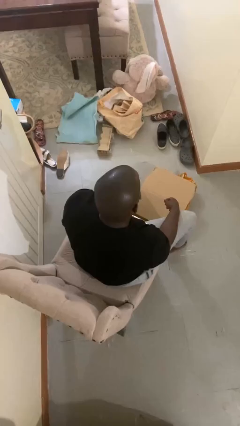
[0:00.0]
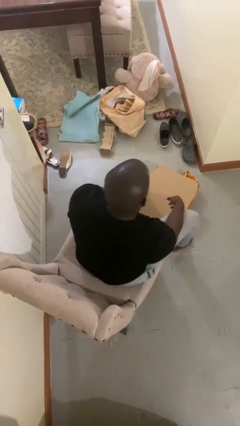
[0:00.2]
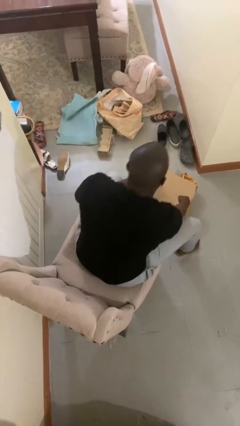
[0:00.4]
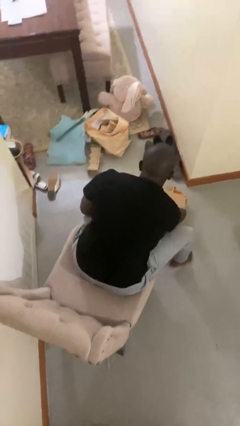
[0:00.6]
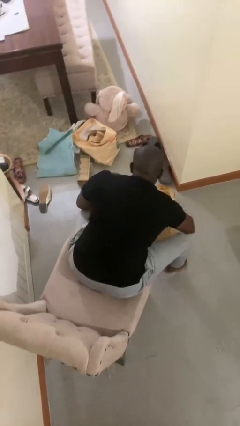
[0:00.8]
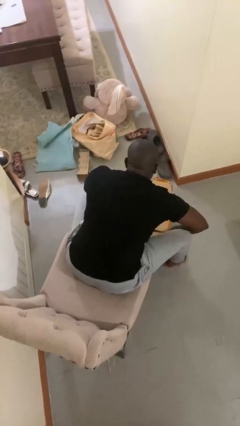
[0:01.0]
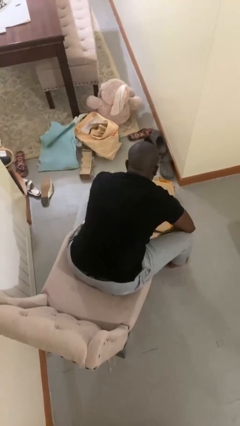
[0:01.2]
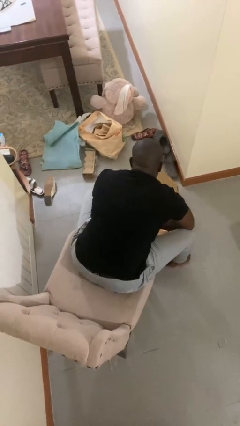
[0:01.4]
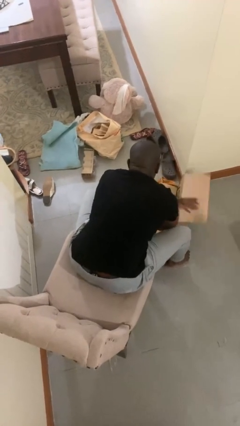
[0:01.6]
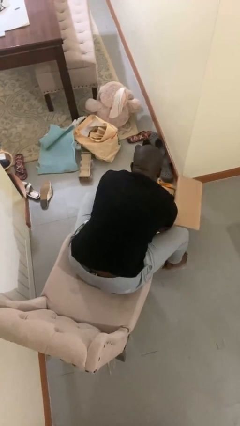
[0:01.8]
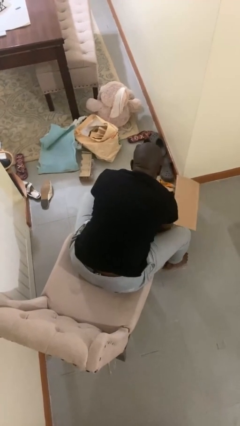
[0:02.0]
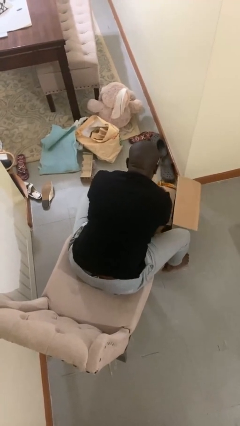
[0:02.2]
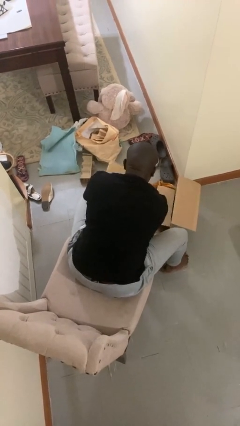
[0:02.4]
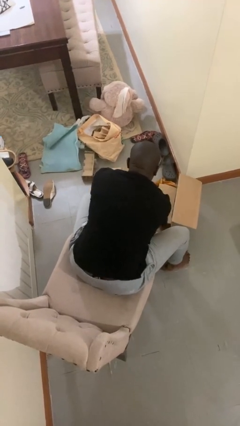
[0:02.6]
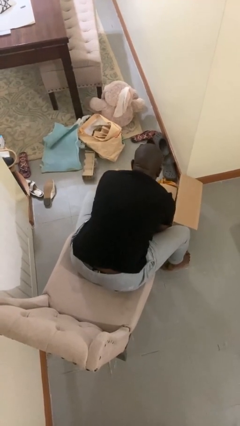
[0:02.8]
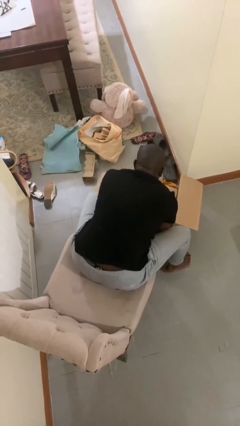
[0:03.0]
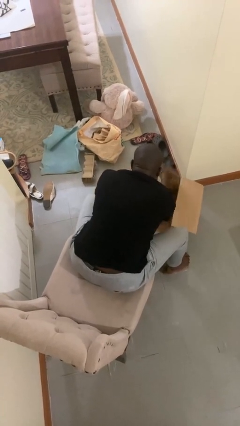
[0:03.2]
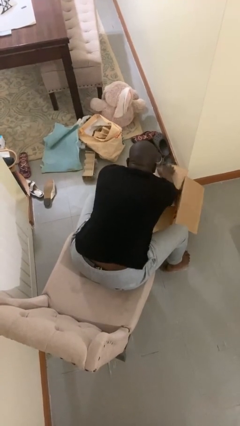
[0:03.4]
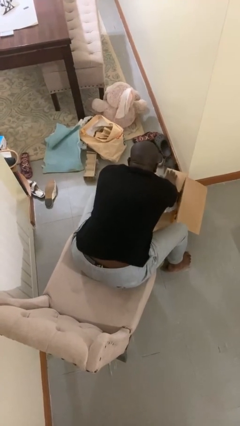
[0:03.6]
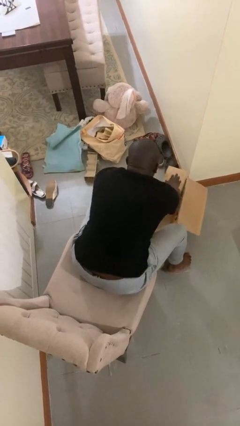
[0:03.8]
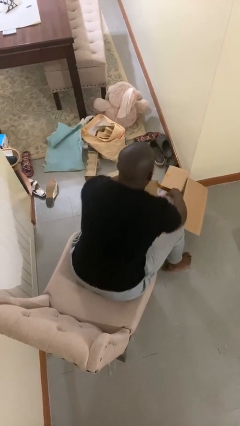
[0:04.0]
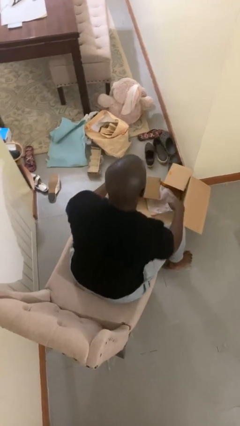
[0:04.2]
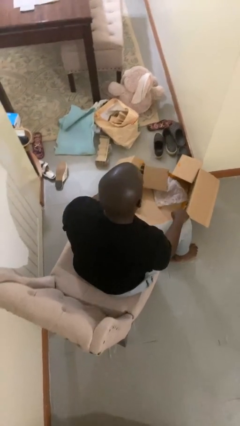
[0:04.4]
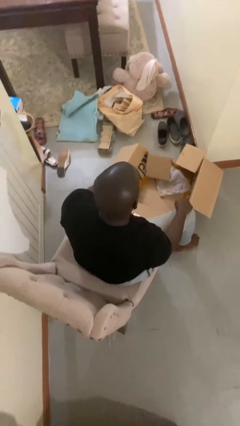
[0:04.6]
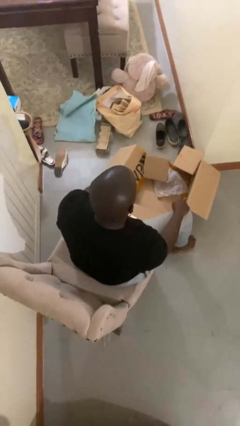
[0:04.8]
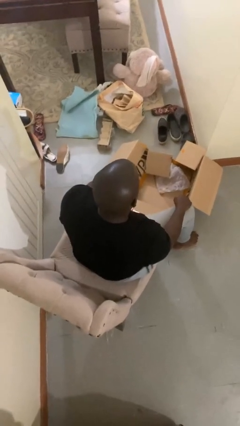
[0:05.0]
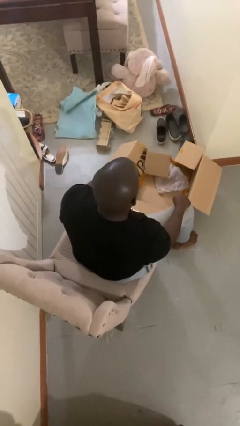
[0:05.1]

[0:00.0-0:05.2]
person opens box

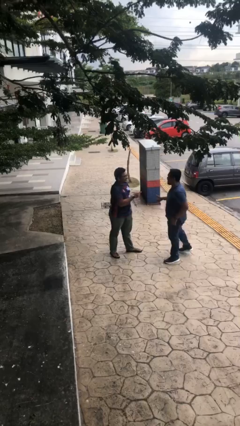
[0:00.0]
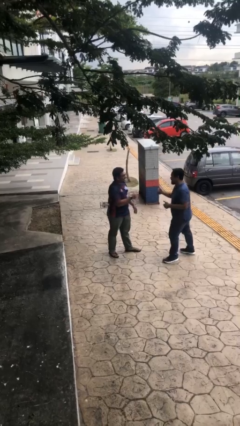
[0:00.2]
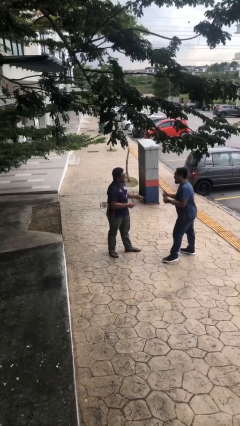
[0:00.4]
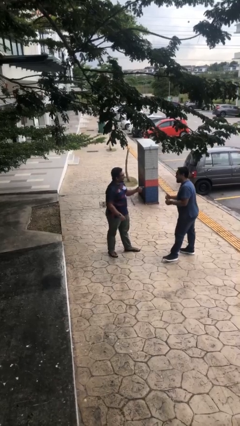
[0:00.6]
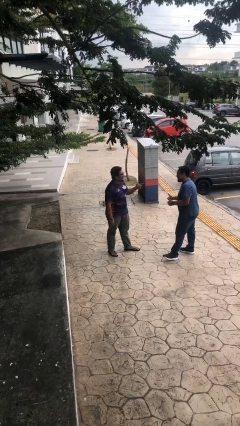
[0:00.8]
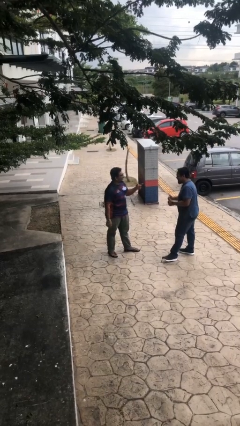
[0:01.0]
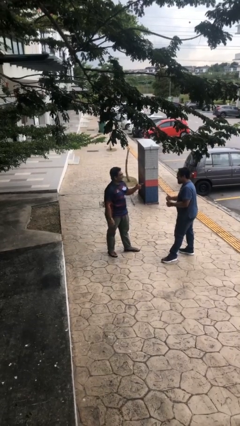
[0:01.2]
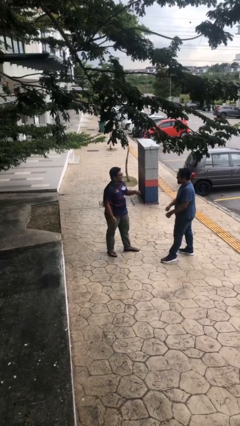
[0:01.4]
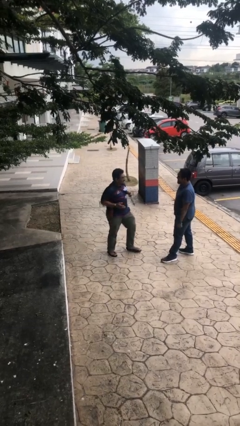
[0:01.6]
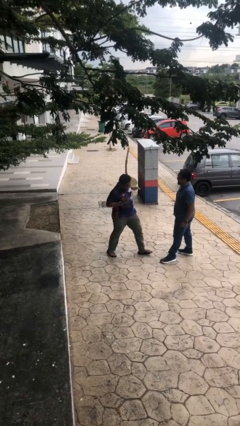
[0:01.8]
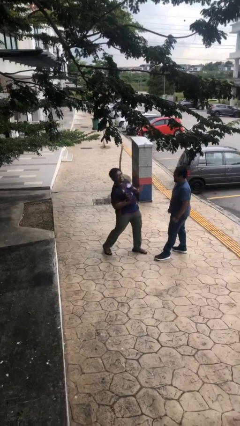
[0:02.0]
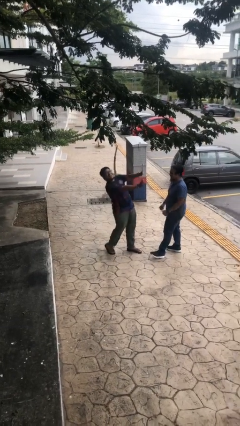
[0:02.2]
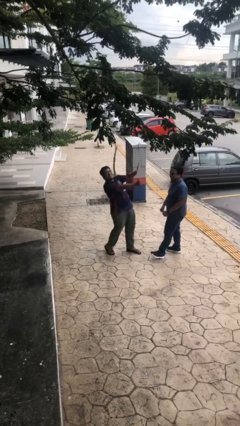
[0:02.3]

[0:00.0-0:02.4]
person talks to person

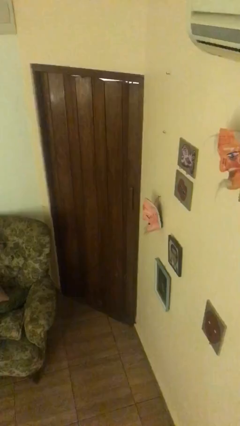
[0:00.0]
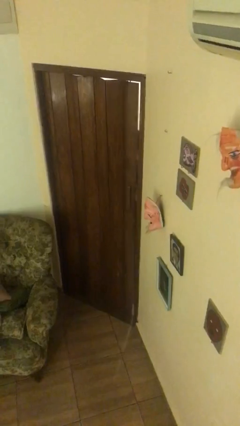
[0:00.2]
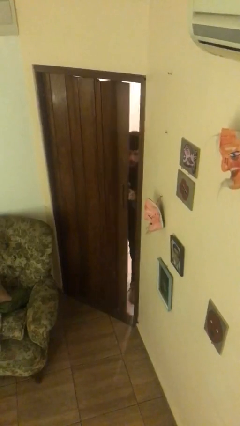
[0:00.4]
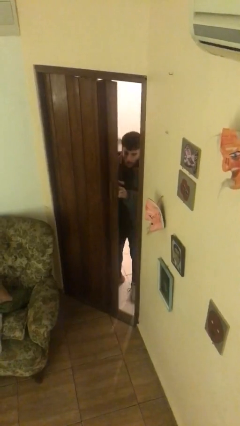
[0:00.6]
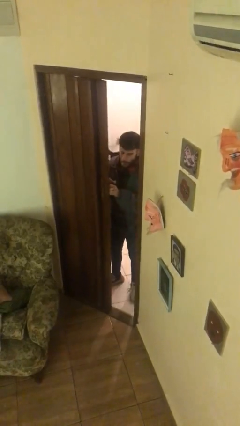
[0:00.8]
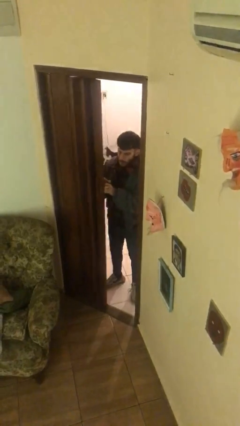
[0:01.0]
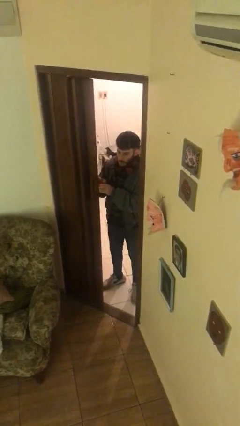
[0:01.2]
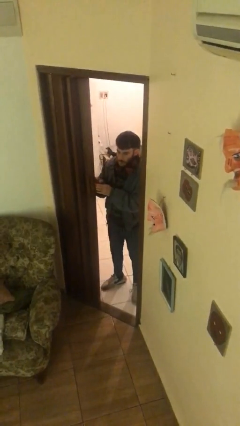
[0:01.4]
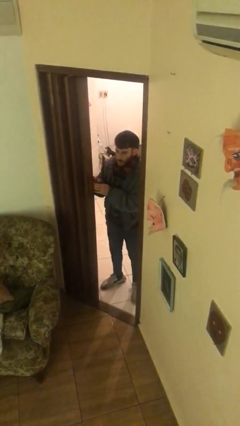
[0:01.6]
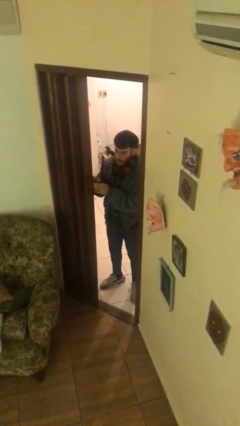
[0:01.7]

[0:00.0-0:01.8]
person opens sliding door

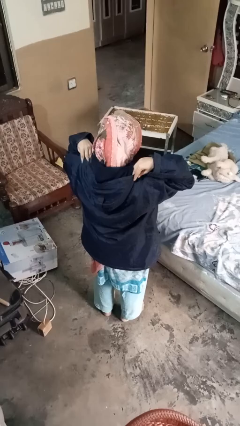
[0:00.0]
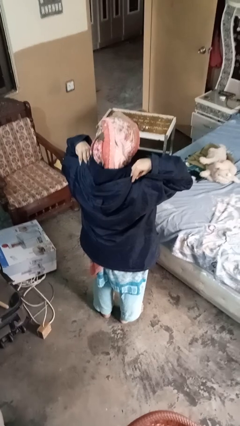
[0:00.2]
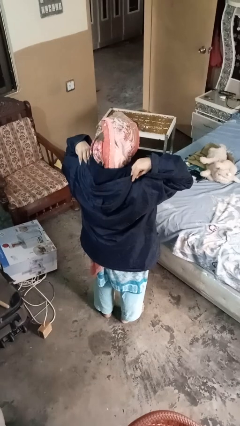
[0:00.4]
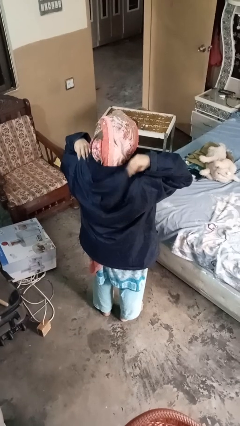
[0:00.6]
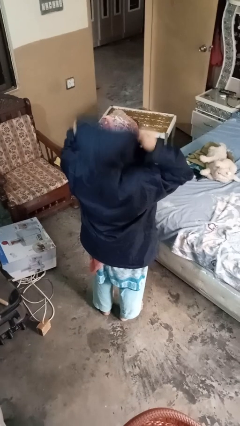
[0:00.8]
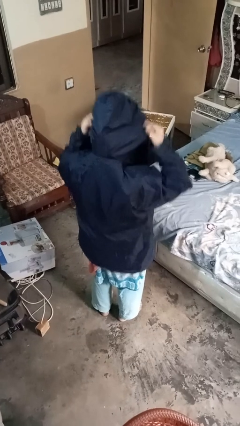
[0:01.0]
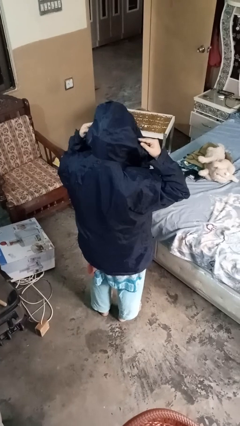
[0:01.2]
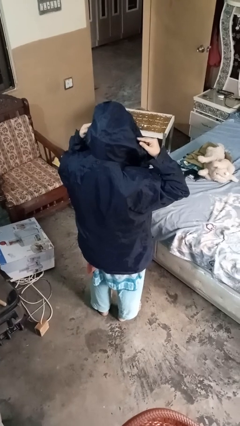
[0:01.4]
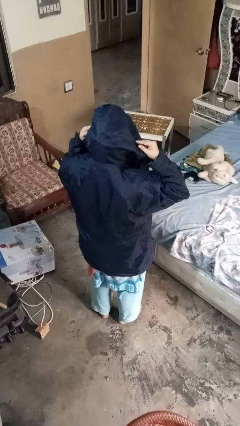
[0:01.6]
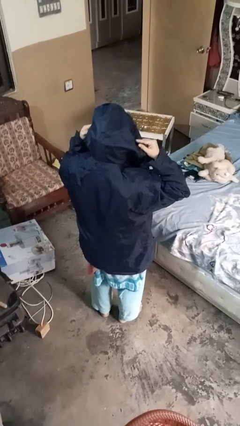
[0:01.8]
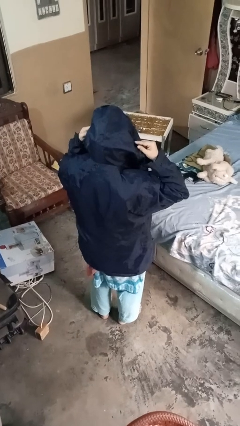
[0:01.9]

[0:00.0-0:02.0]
person puts on hoodie

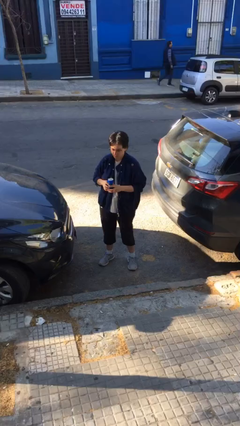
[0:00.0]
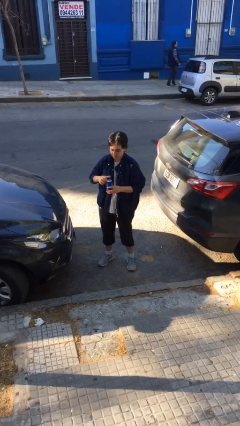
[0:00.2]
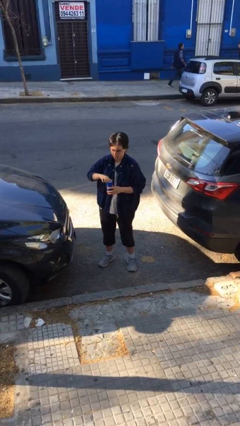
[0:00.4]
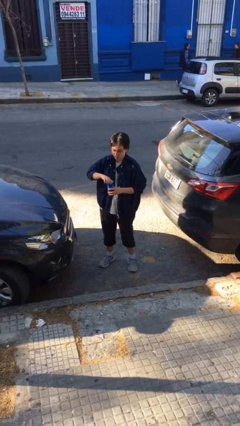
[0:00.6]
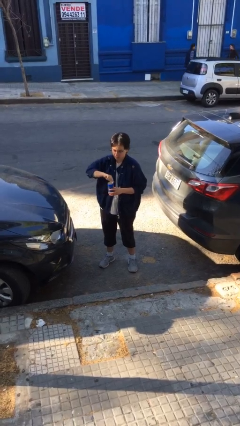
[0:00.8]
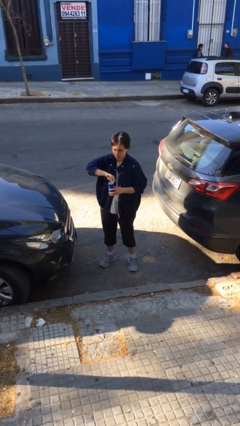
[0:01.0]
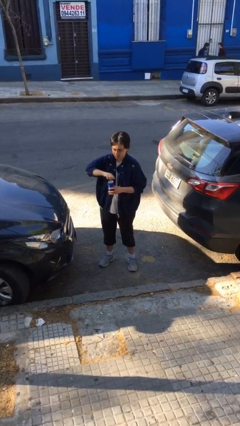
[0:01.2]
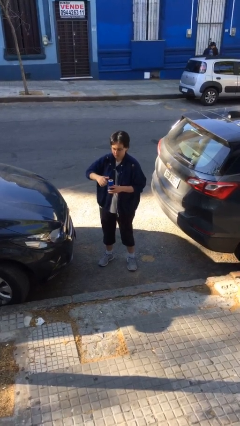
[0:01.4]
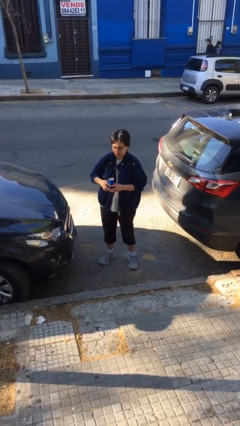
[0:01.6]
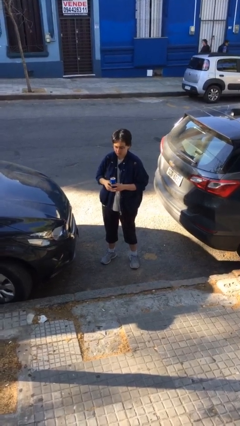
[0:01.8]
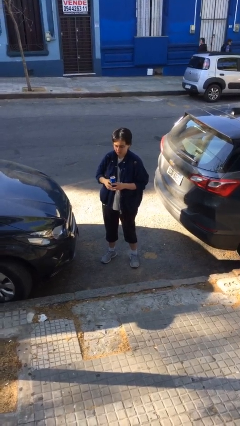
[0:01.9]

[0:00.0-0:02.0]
person opens beverage can

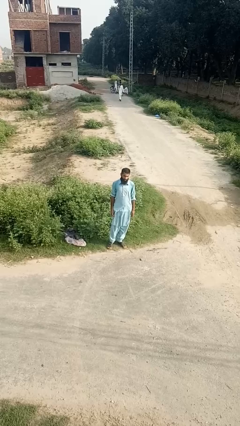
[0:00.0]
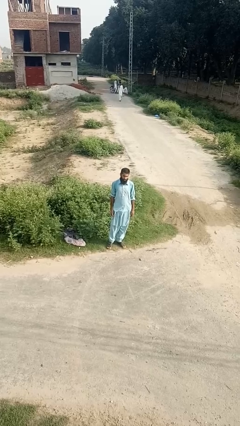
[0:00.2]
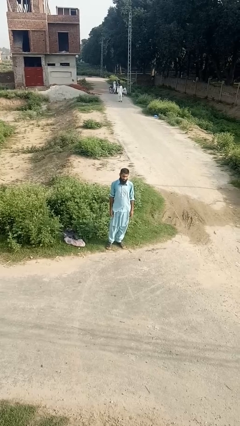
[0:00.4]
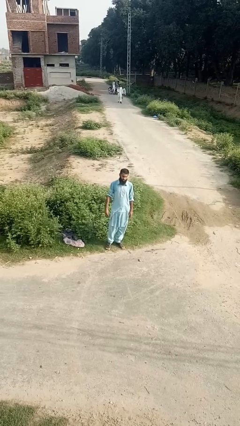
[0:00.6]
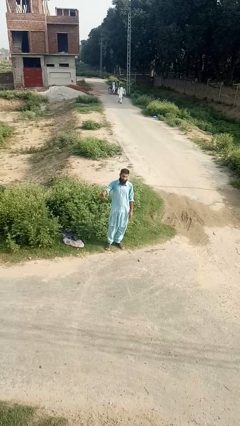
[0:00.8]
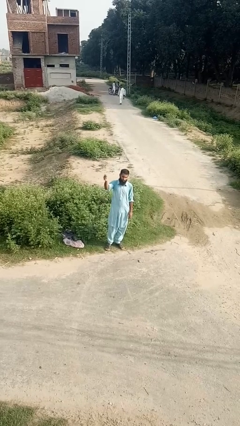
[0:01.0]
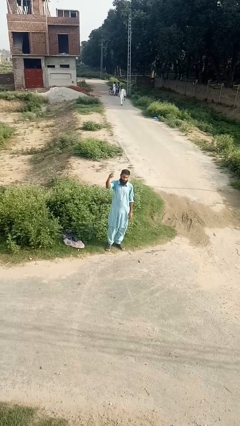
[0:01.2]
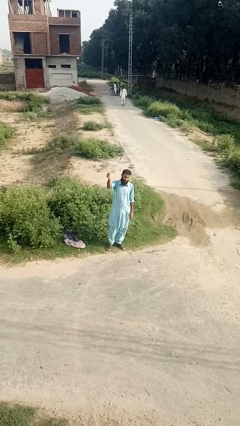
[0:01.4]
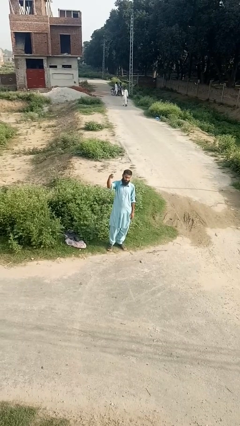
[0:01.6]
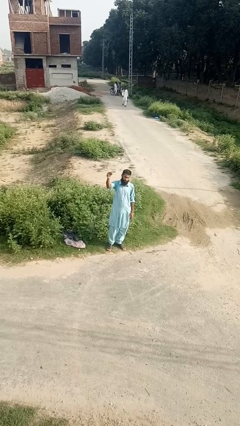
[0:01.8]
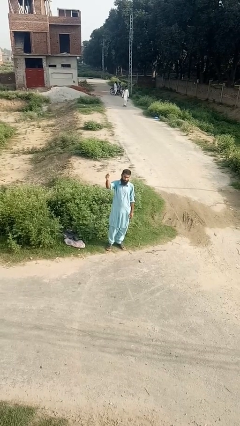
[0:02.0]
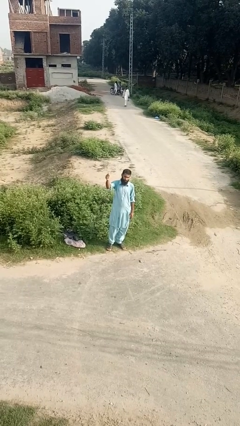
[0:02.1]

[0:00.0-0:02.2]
person snaps fingers

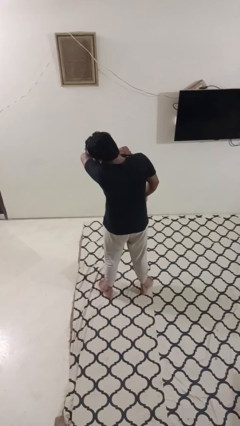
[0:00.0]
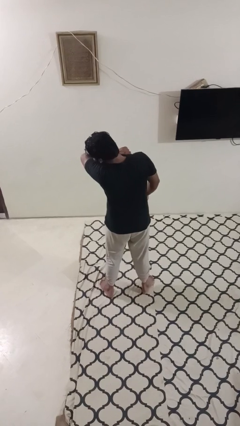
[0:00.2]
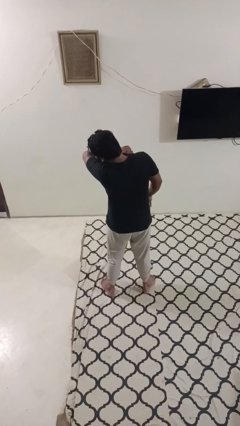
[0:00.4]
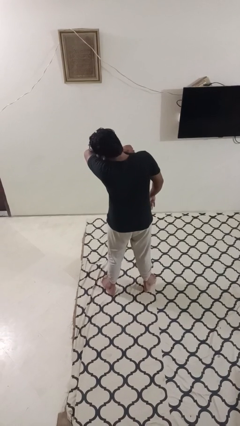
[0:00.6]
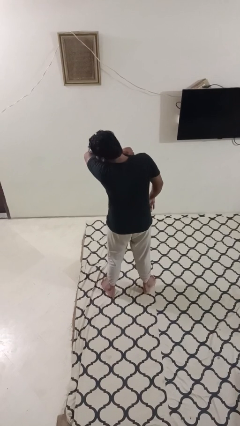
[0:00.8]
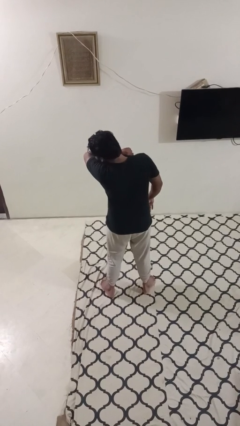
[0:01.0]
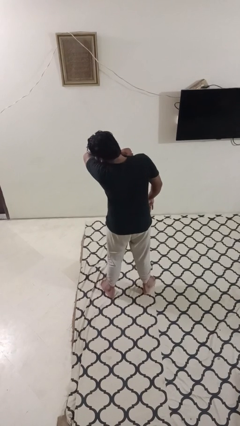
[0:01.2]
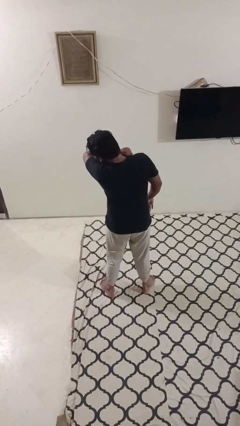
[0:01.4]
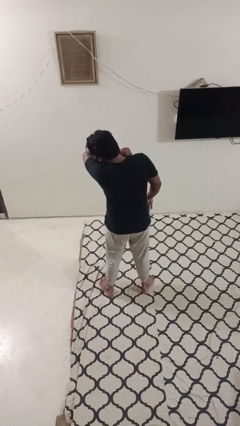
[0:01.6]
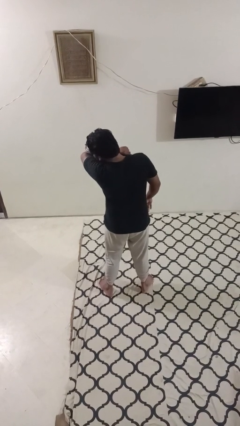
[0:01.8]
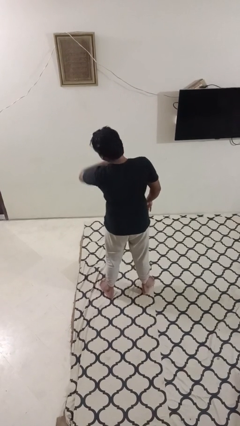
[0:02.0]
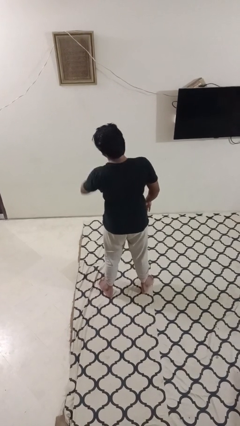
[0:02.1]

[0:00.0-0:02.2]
person sneezes into arm
